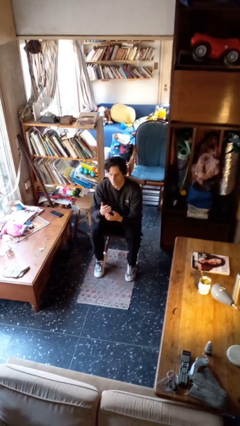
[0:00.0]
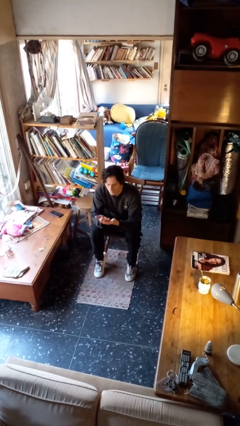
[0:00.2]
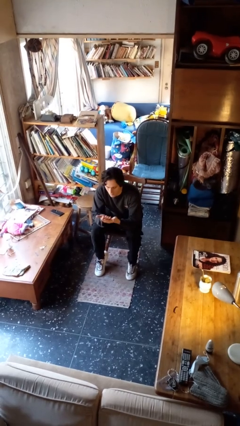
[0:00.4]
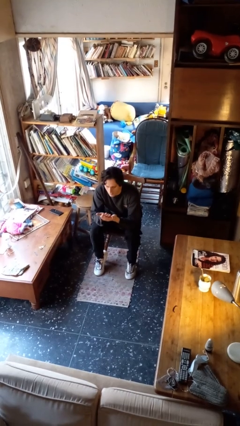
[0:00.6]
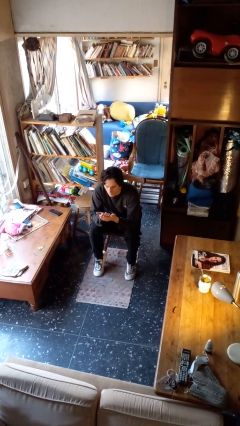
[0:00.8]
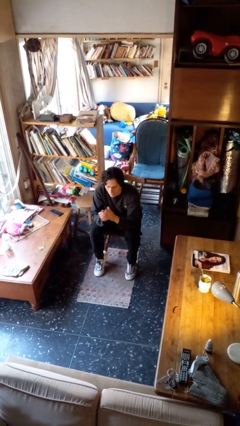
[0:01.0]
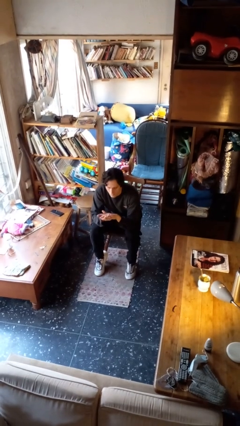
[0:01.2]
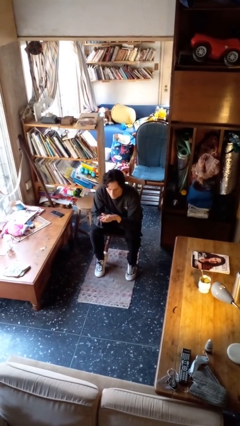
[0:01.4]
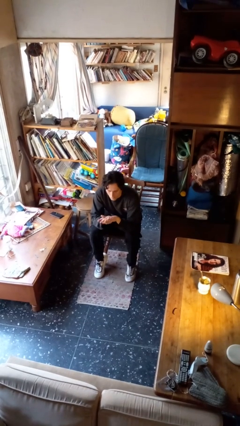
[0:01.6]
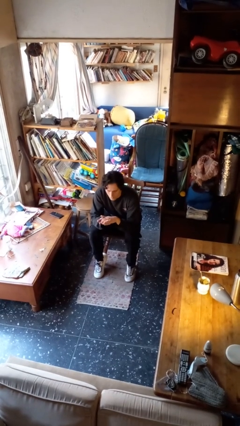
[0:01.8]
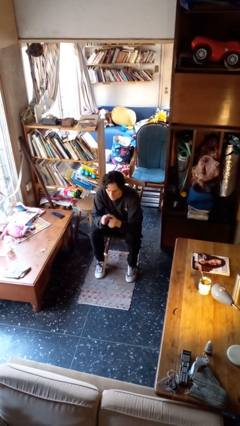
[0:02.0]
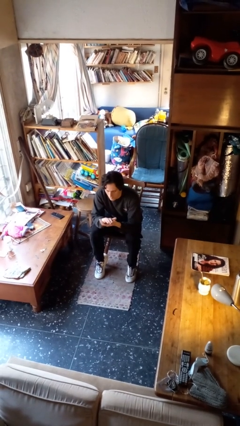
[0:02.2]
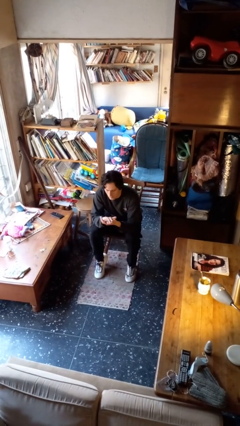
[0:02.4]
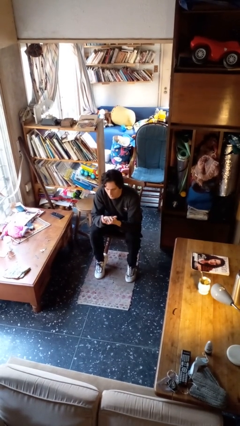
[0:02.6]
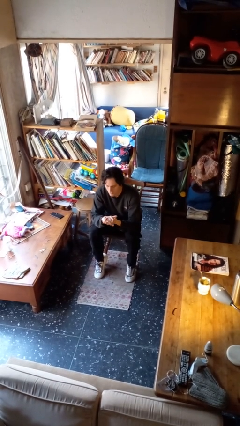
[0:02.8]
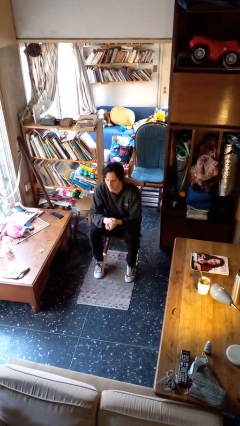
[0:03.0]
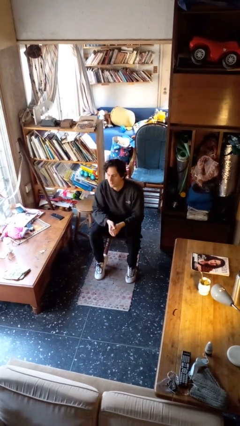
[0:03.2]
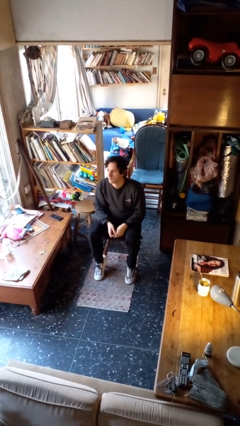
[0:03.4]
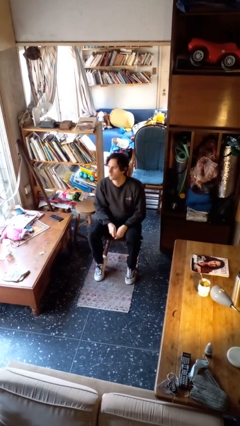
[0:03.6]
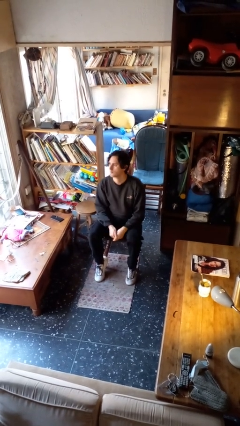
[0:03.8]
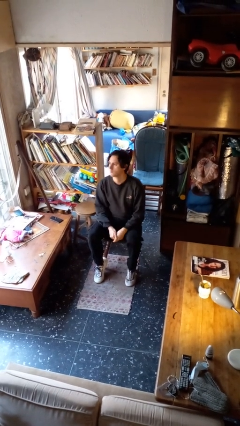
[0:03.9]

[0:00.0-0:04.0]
person looks at hands in lap

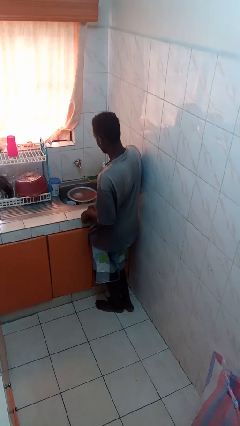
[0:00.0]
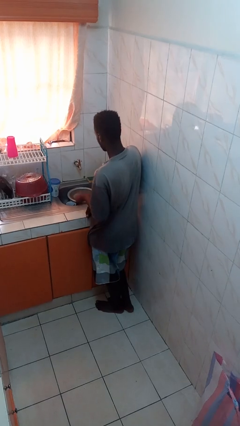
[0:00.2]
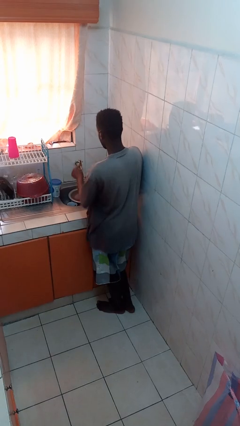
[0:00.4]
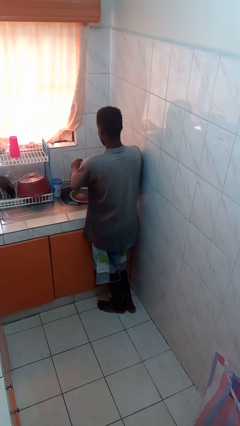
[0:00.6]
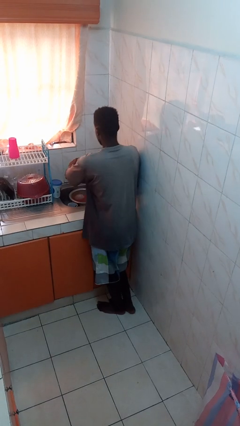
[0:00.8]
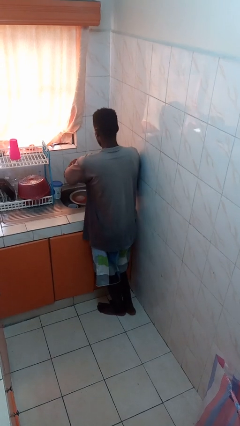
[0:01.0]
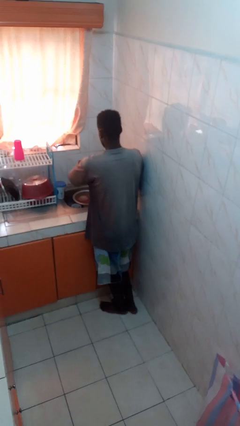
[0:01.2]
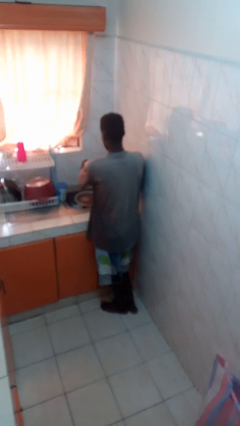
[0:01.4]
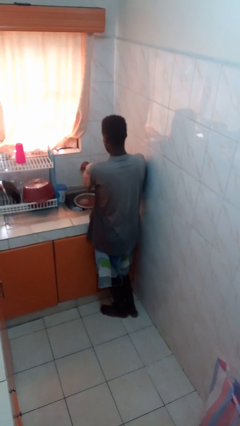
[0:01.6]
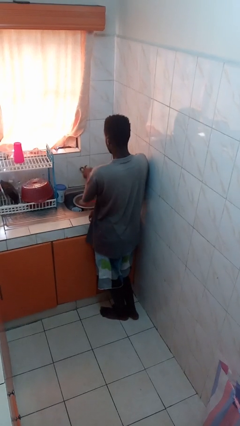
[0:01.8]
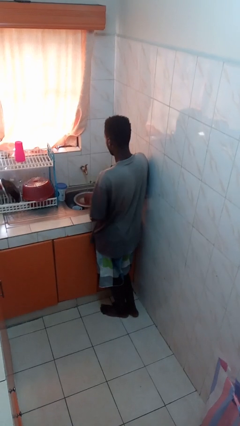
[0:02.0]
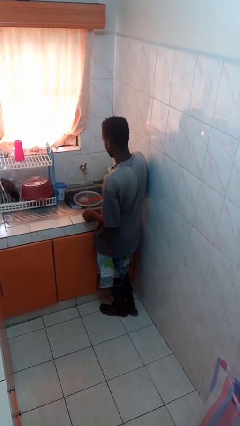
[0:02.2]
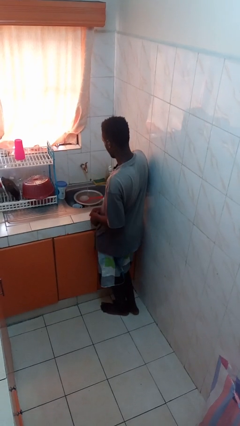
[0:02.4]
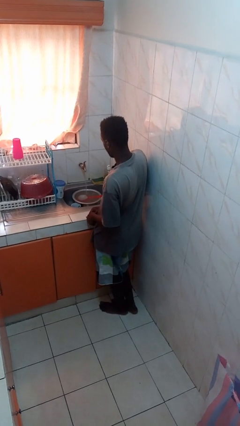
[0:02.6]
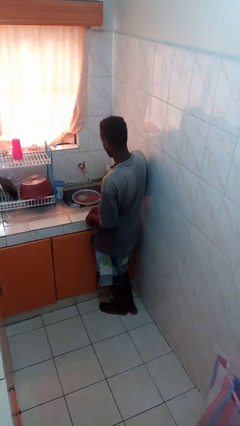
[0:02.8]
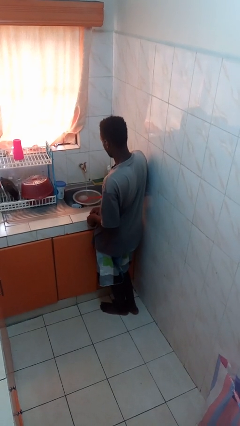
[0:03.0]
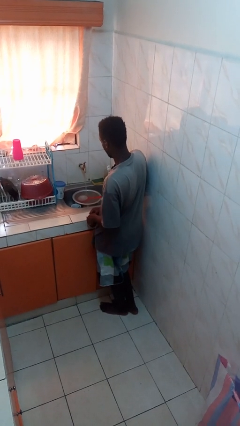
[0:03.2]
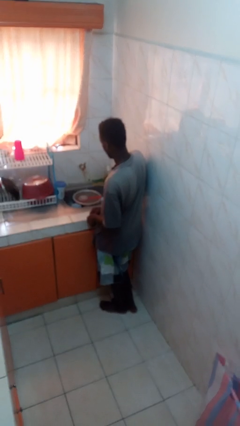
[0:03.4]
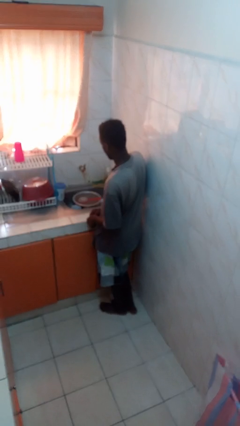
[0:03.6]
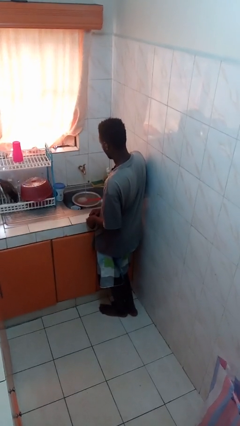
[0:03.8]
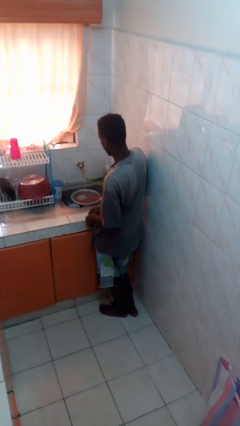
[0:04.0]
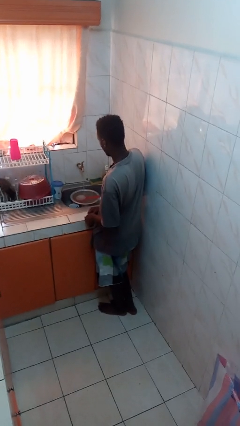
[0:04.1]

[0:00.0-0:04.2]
person turns on faucet

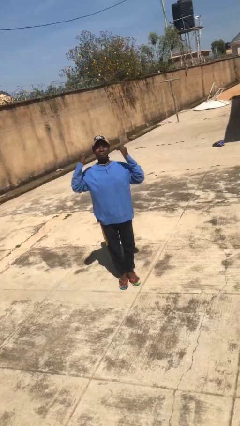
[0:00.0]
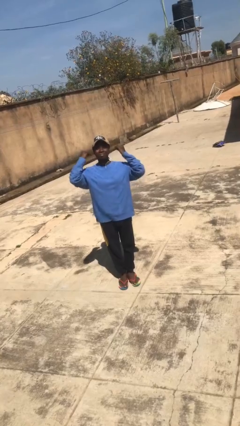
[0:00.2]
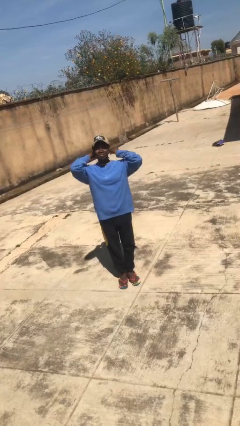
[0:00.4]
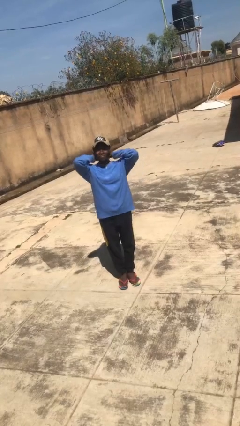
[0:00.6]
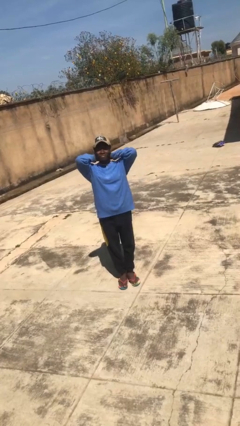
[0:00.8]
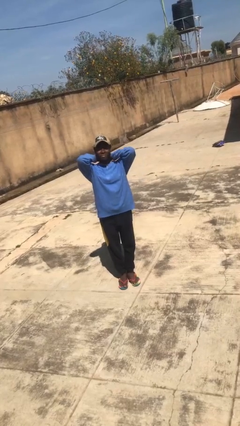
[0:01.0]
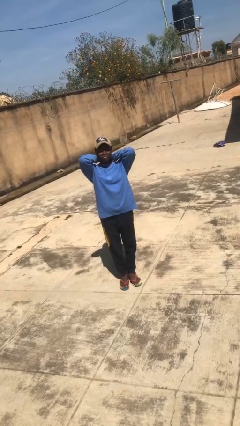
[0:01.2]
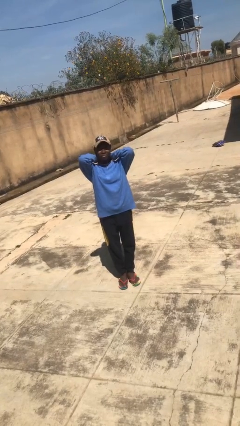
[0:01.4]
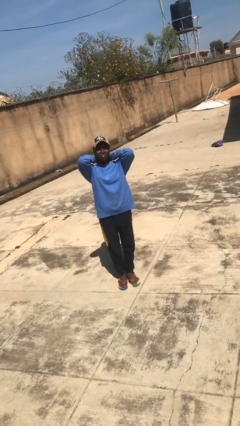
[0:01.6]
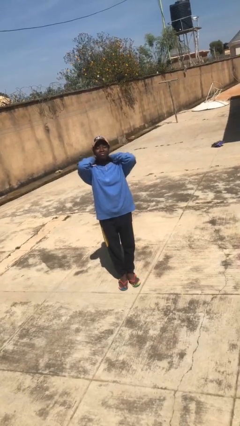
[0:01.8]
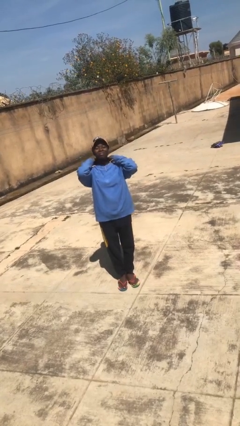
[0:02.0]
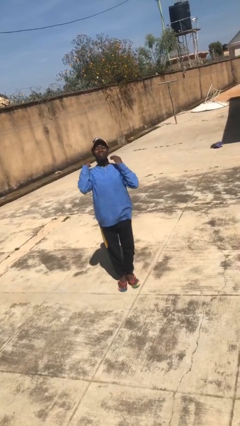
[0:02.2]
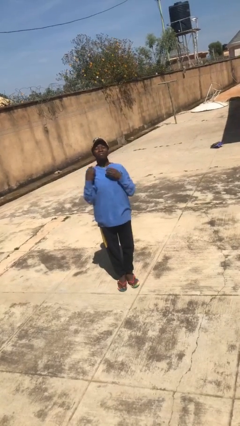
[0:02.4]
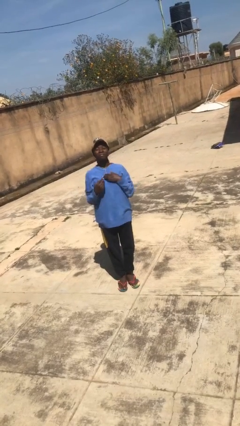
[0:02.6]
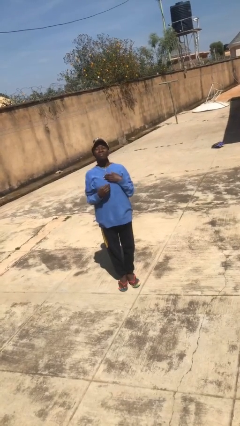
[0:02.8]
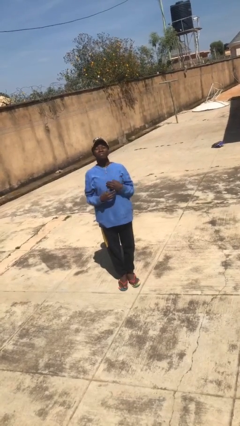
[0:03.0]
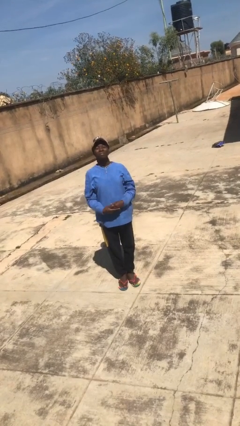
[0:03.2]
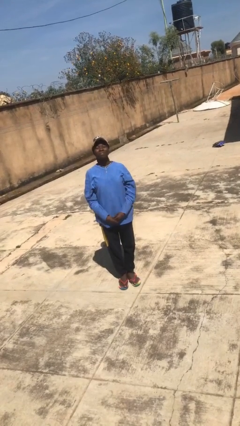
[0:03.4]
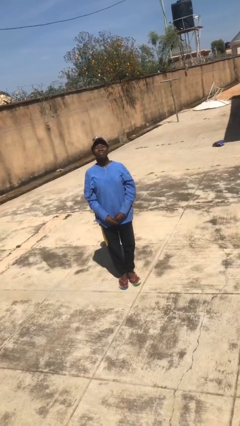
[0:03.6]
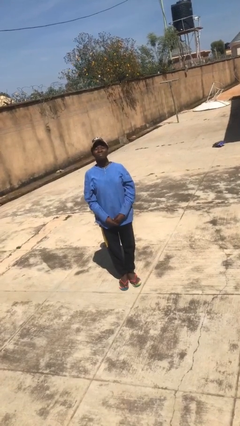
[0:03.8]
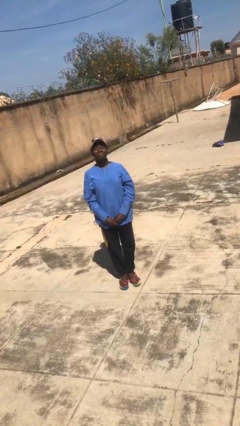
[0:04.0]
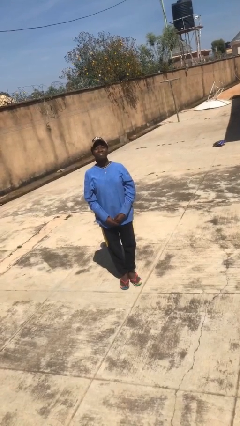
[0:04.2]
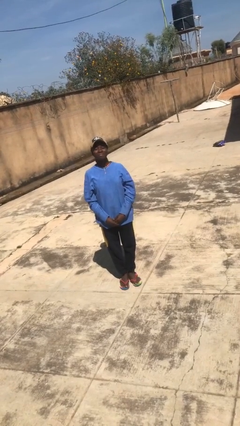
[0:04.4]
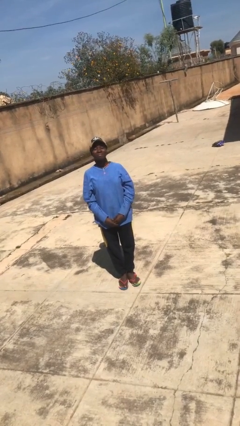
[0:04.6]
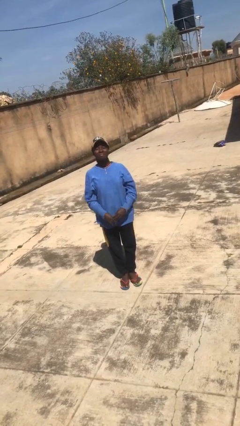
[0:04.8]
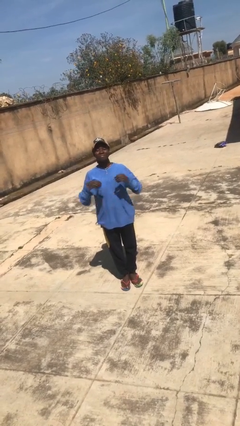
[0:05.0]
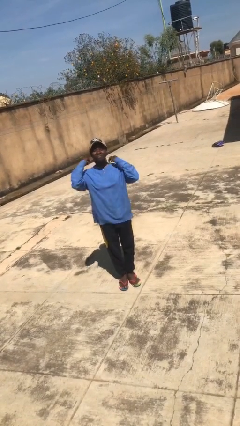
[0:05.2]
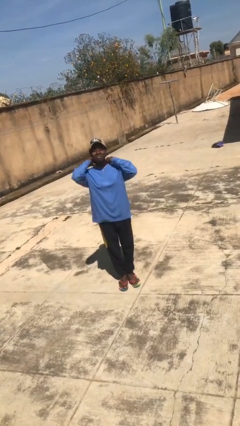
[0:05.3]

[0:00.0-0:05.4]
person puts on necklace

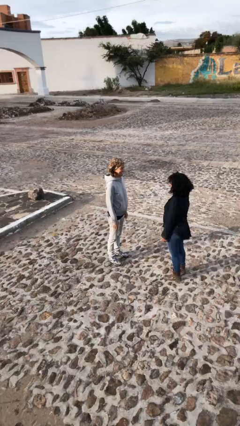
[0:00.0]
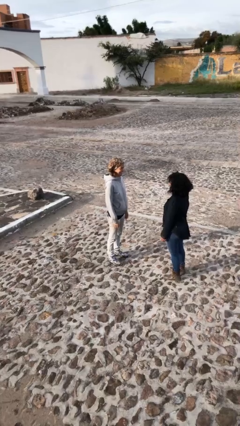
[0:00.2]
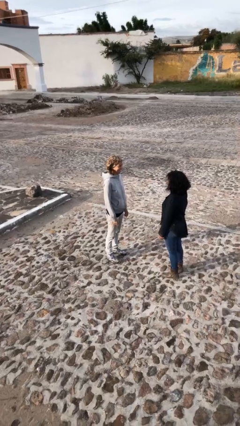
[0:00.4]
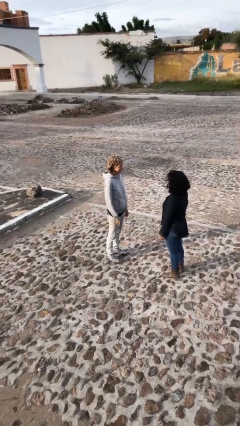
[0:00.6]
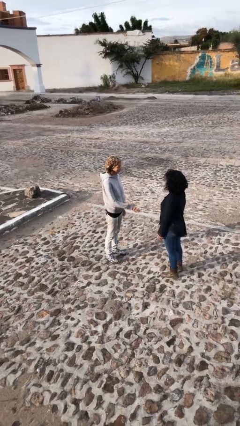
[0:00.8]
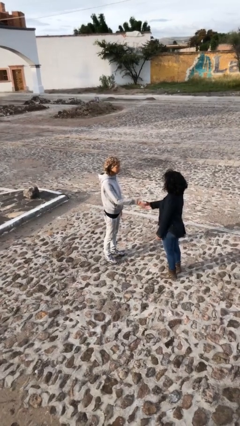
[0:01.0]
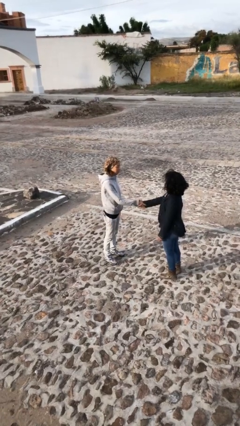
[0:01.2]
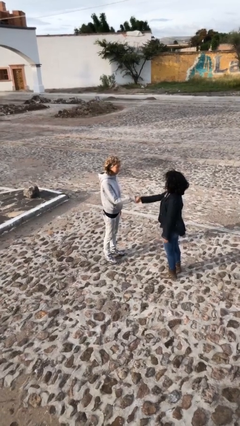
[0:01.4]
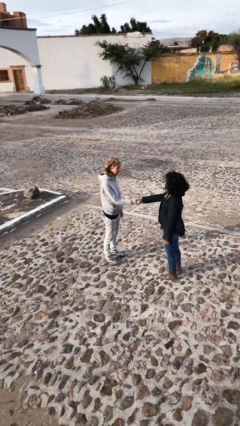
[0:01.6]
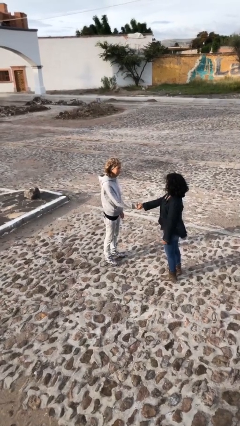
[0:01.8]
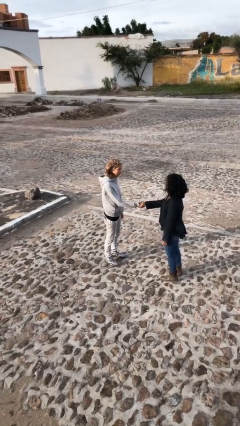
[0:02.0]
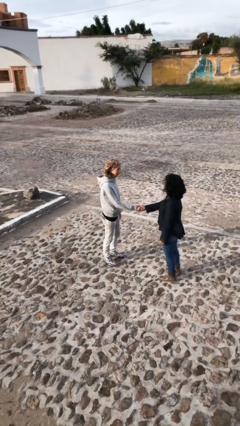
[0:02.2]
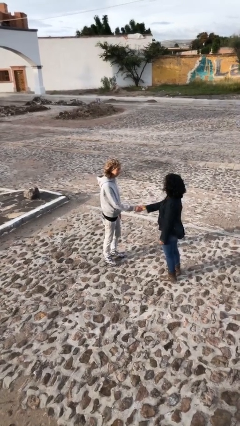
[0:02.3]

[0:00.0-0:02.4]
person shakes hand

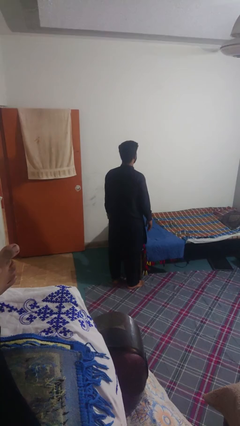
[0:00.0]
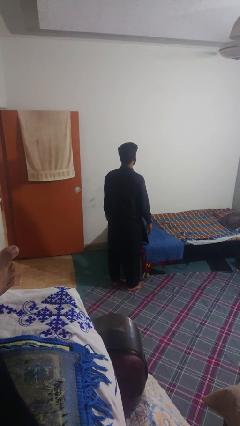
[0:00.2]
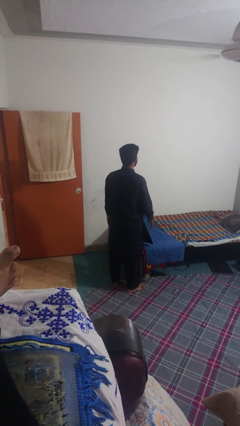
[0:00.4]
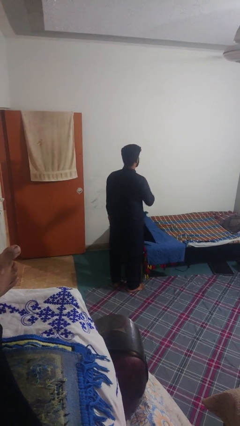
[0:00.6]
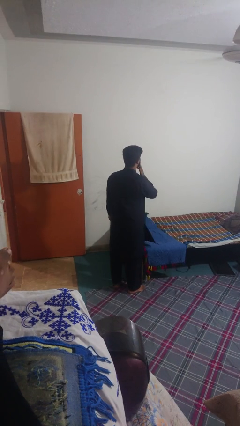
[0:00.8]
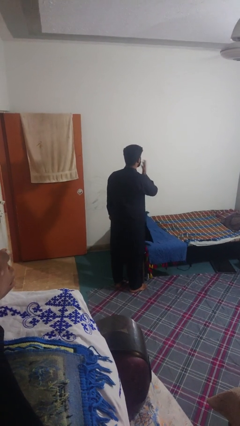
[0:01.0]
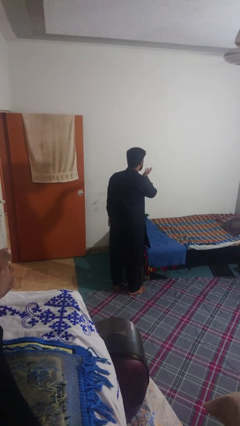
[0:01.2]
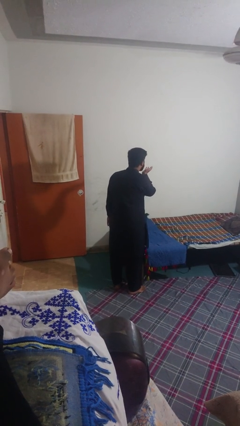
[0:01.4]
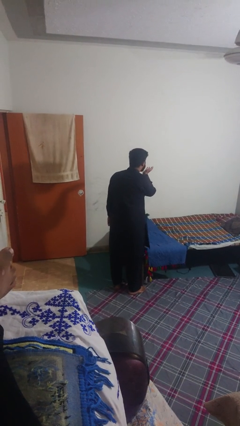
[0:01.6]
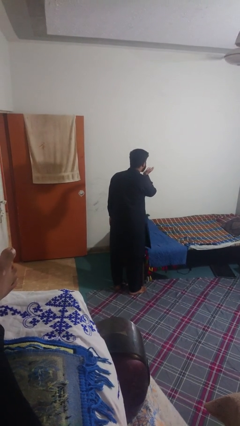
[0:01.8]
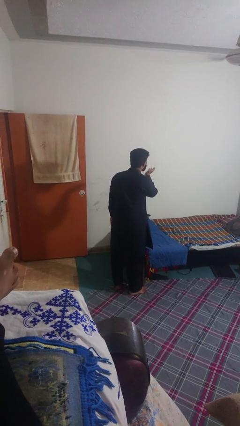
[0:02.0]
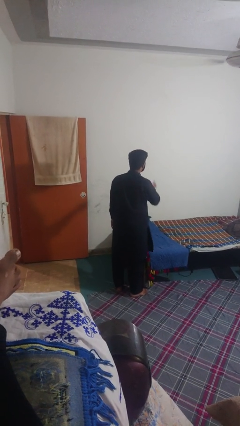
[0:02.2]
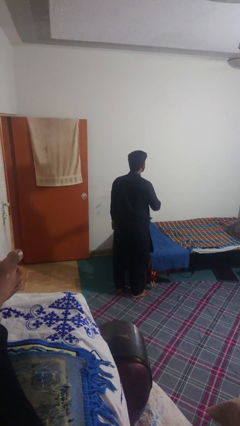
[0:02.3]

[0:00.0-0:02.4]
person gestures blow kiss
